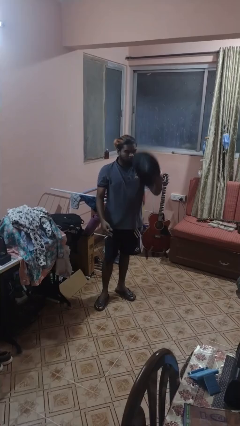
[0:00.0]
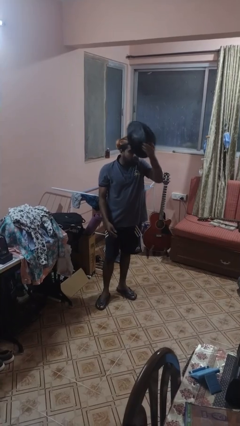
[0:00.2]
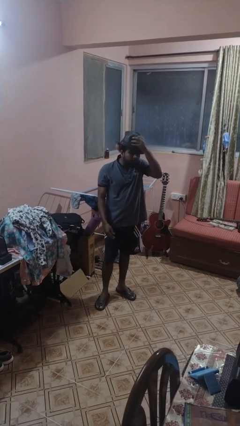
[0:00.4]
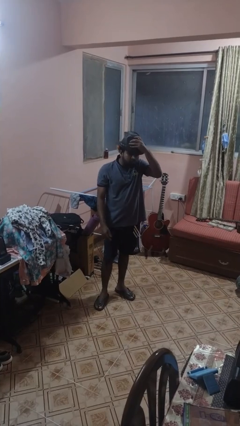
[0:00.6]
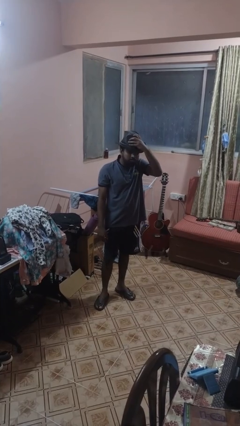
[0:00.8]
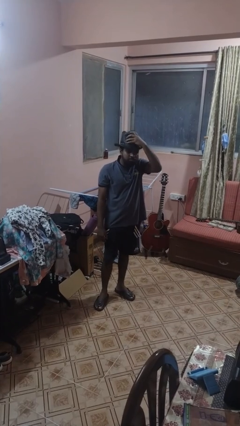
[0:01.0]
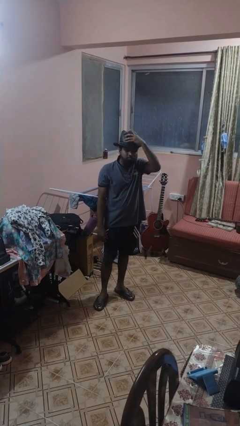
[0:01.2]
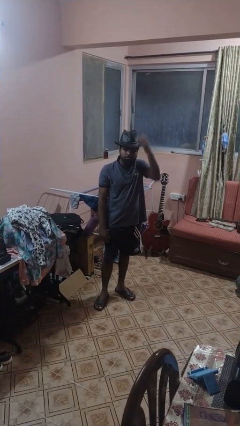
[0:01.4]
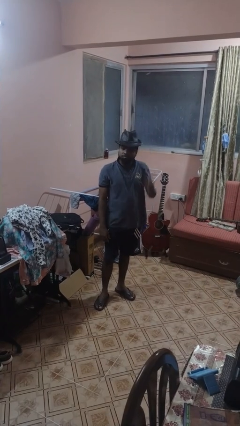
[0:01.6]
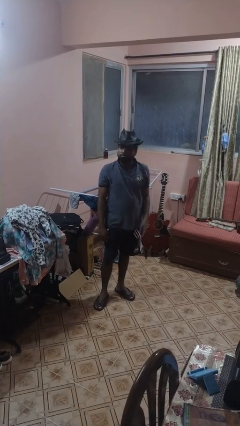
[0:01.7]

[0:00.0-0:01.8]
person puts on hat

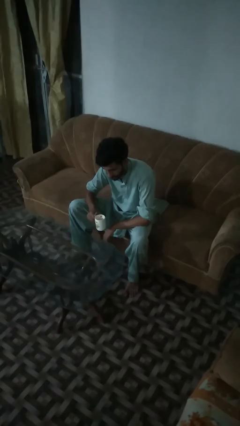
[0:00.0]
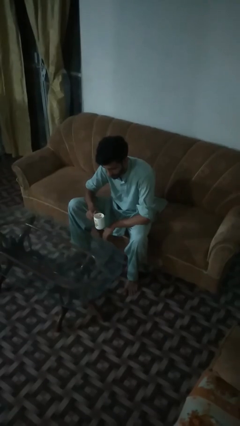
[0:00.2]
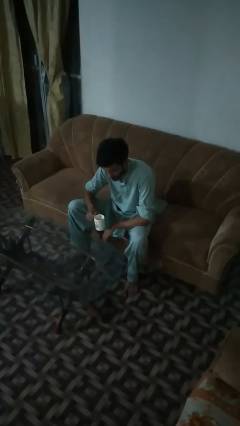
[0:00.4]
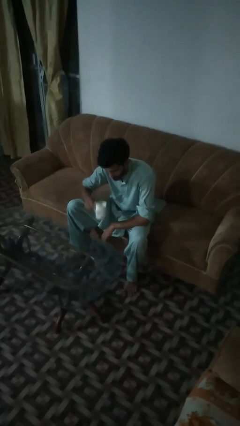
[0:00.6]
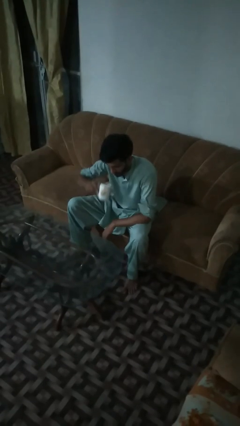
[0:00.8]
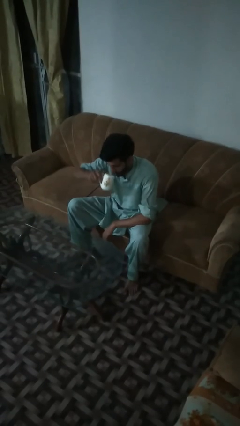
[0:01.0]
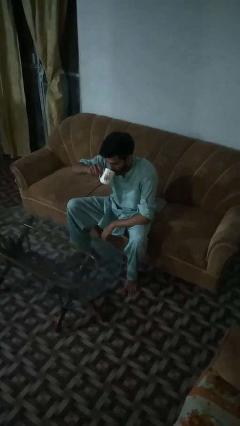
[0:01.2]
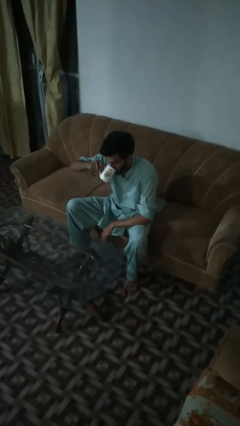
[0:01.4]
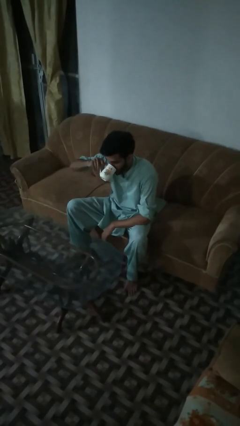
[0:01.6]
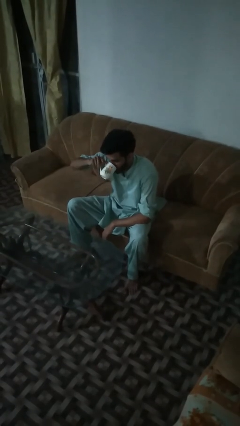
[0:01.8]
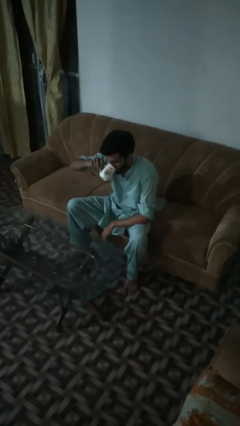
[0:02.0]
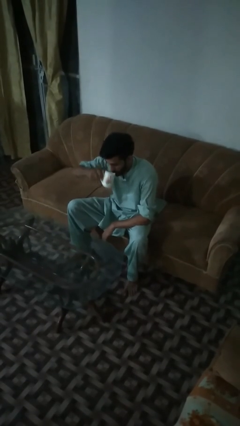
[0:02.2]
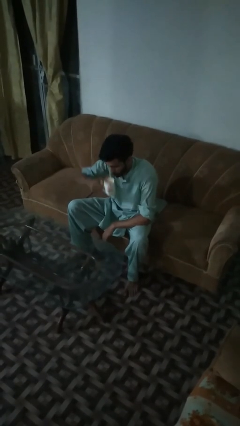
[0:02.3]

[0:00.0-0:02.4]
person drinks from mug

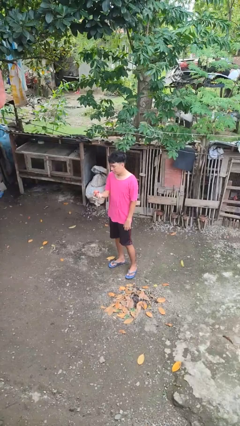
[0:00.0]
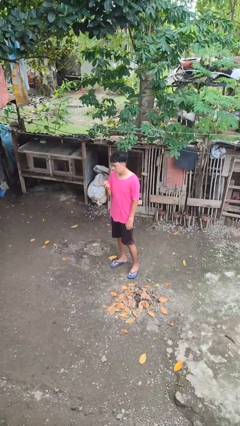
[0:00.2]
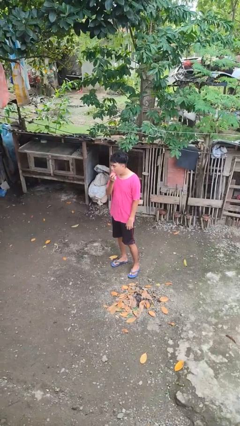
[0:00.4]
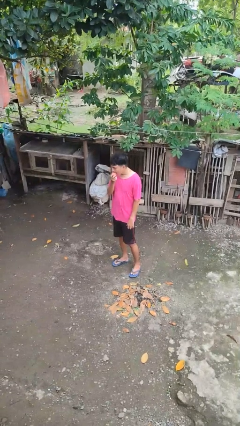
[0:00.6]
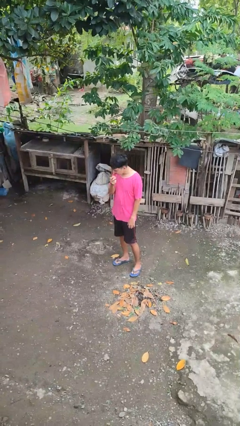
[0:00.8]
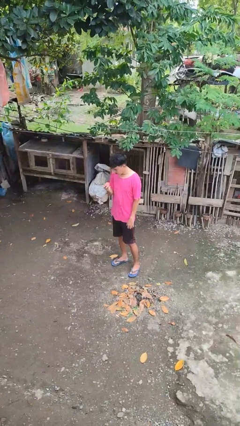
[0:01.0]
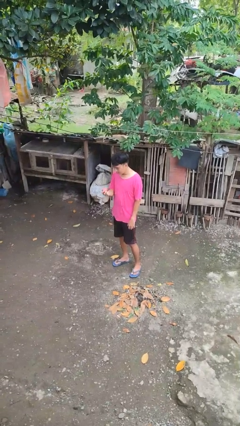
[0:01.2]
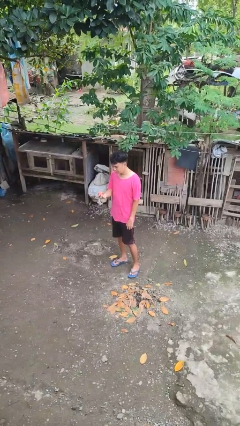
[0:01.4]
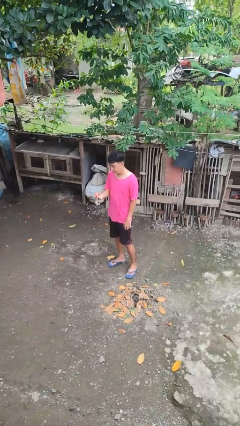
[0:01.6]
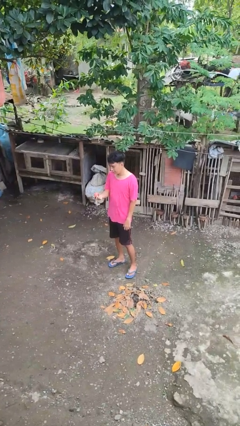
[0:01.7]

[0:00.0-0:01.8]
person eats apple

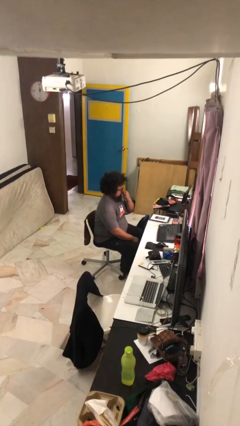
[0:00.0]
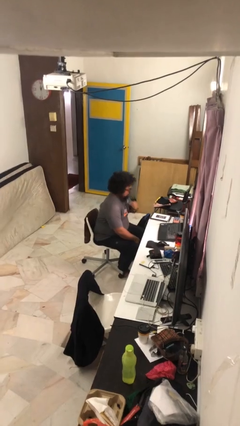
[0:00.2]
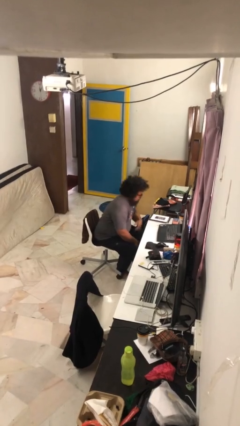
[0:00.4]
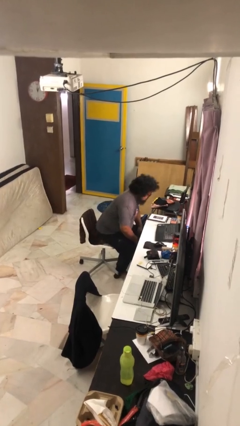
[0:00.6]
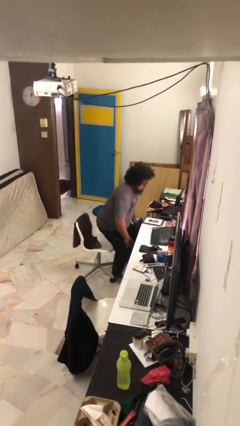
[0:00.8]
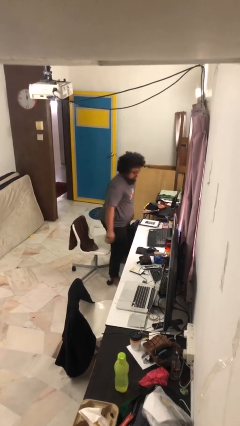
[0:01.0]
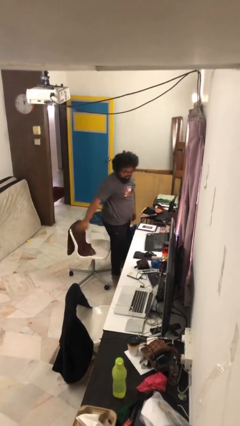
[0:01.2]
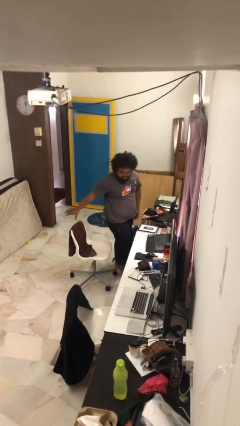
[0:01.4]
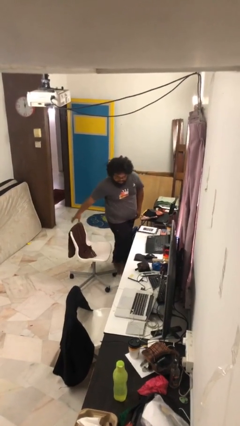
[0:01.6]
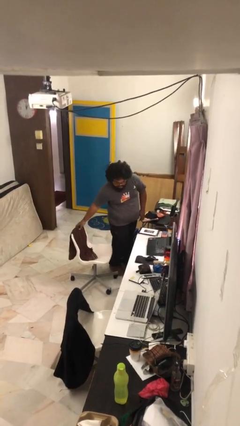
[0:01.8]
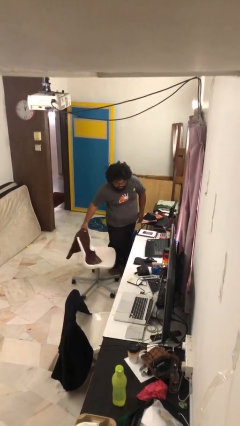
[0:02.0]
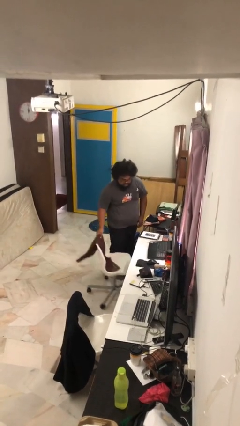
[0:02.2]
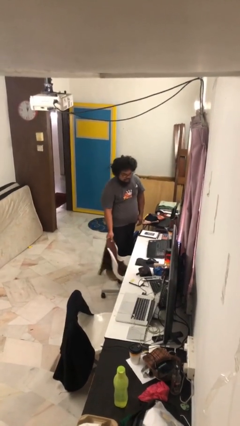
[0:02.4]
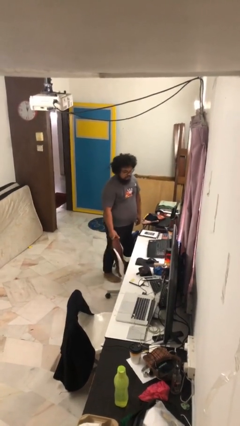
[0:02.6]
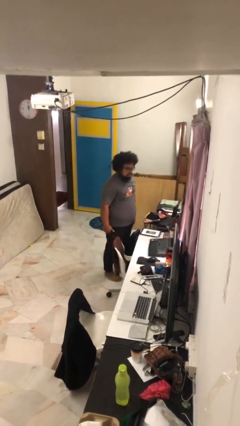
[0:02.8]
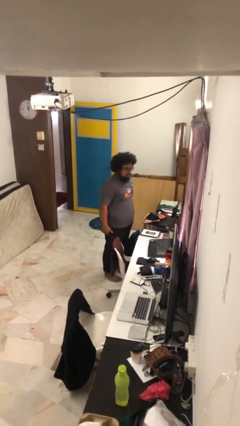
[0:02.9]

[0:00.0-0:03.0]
person stands up

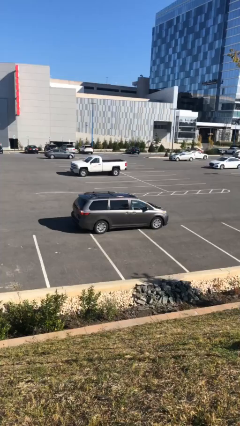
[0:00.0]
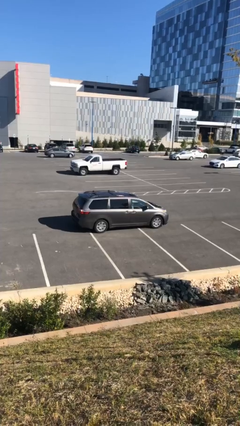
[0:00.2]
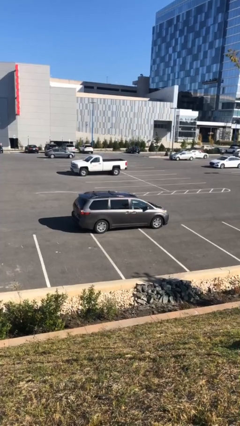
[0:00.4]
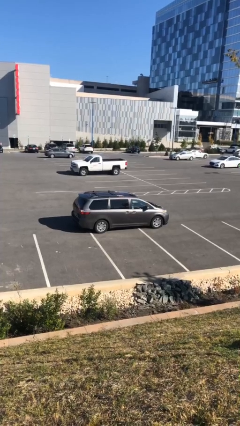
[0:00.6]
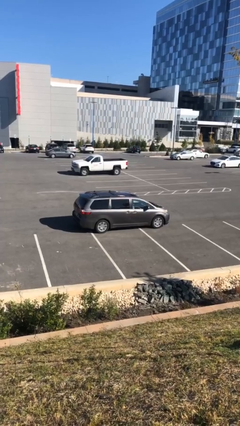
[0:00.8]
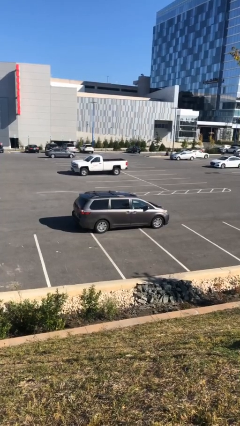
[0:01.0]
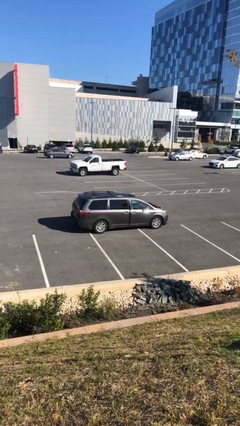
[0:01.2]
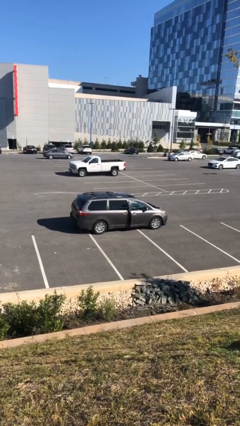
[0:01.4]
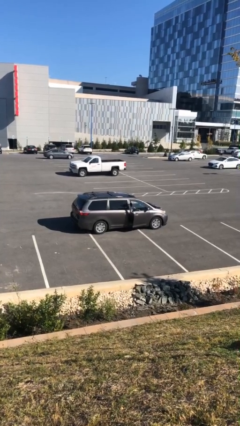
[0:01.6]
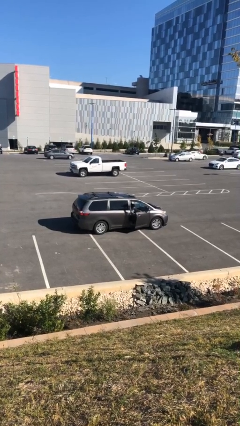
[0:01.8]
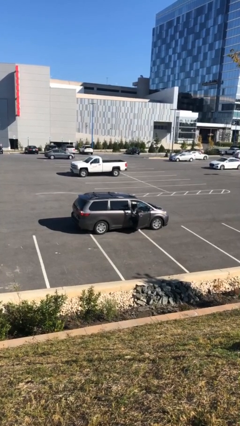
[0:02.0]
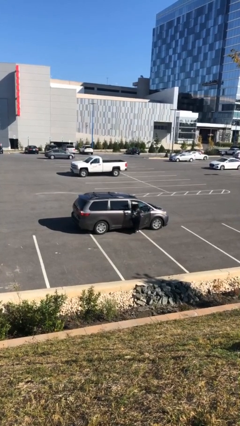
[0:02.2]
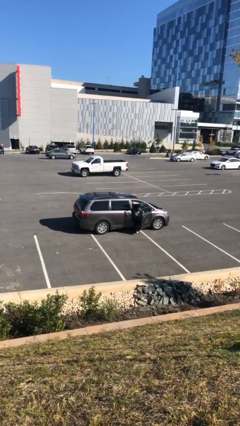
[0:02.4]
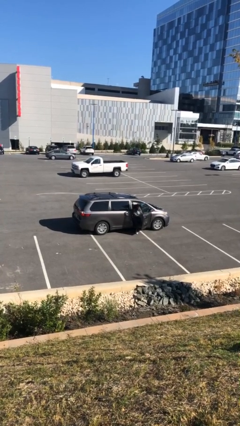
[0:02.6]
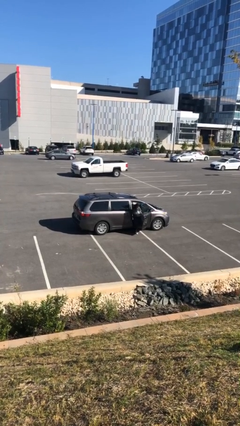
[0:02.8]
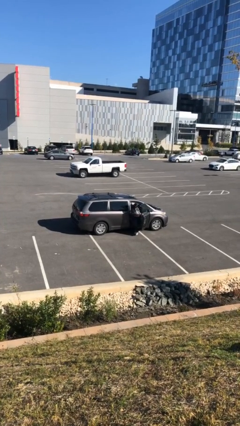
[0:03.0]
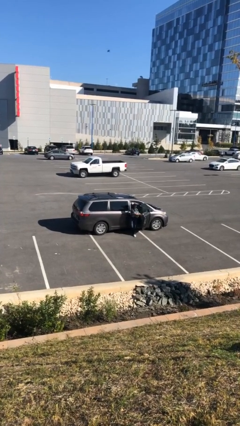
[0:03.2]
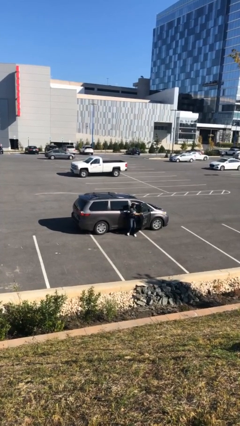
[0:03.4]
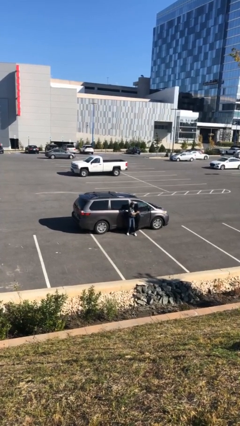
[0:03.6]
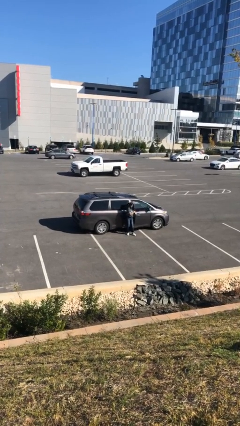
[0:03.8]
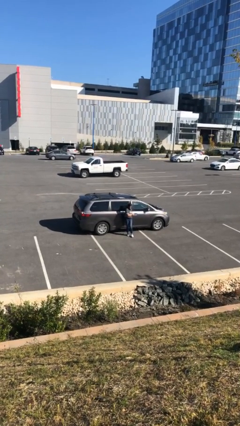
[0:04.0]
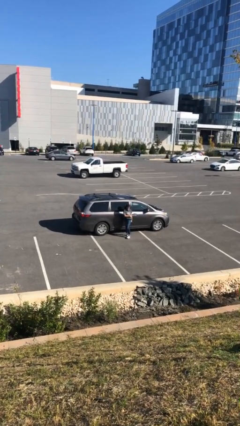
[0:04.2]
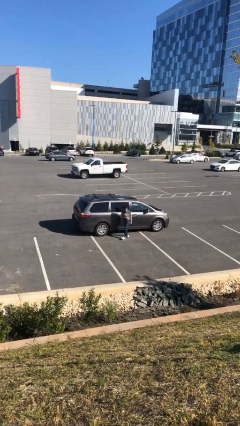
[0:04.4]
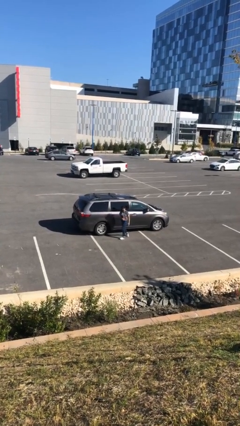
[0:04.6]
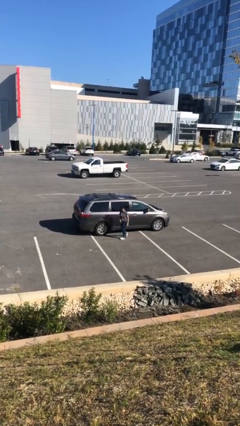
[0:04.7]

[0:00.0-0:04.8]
car drops off person

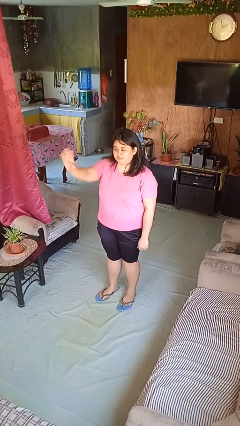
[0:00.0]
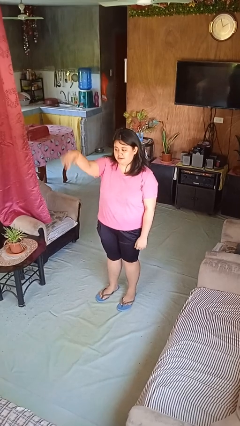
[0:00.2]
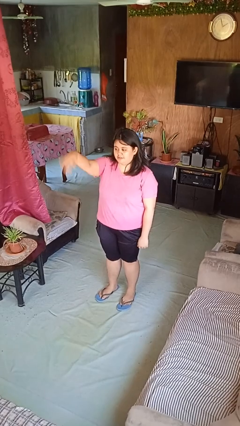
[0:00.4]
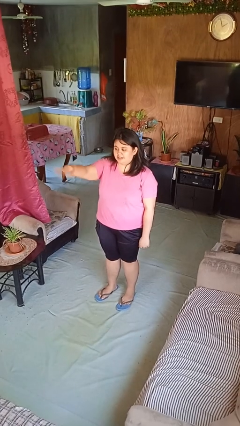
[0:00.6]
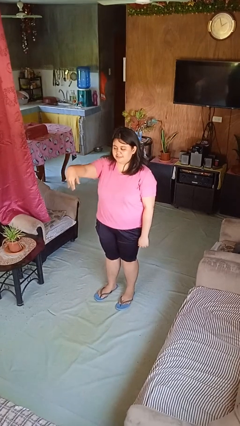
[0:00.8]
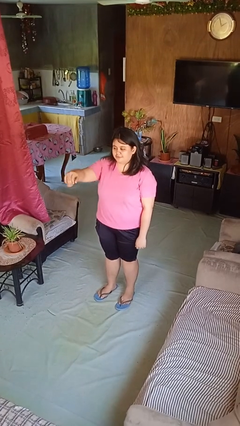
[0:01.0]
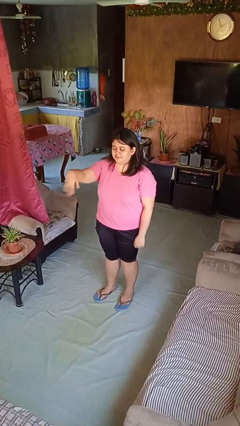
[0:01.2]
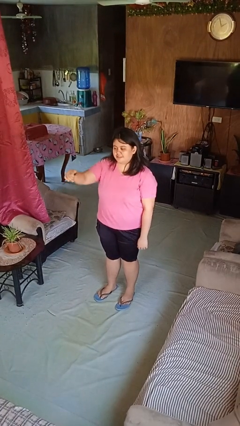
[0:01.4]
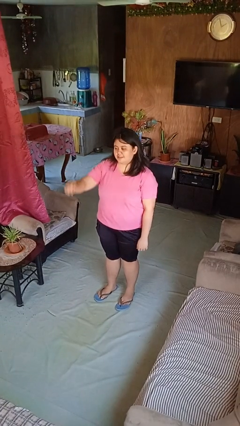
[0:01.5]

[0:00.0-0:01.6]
person gestures come here

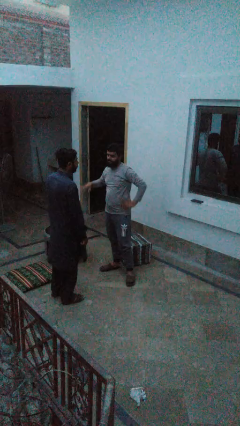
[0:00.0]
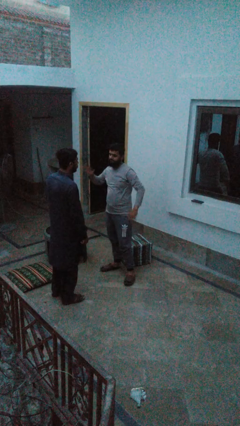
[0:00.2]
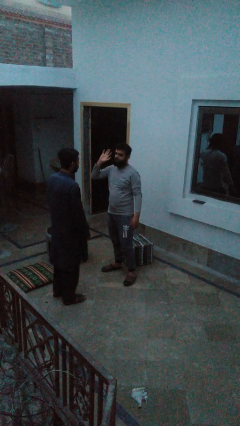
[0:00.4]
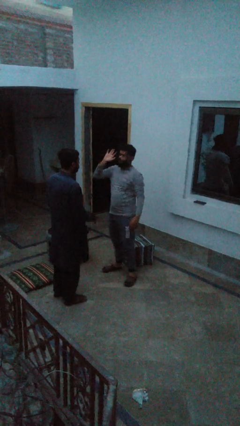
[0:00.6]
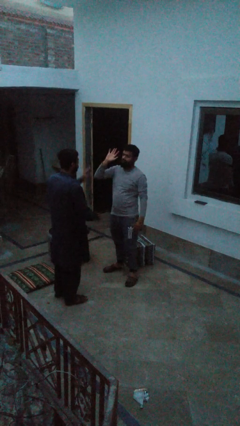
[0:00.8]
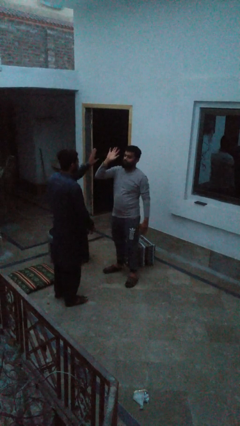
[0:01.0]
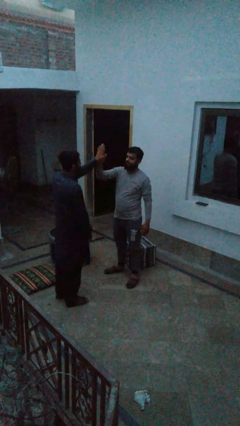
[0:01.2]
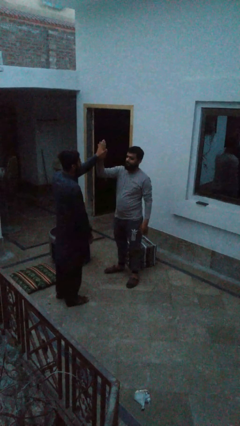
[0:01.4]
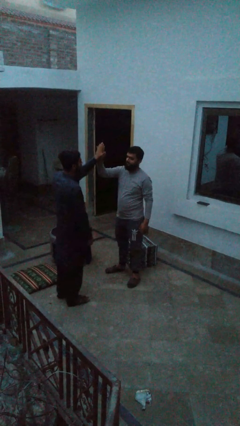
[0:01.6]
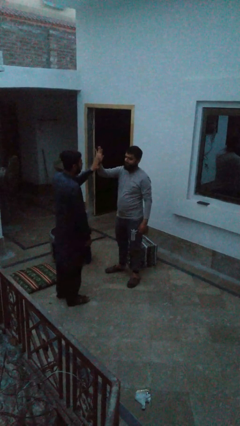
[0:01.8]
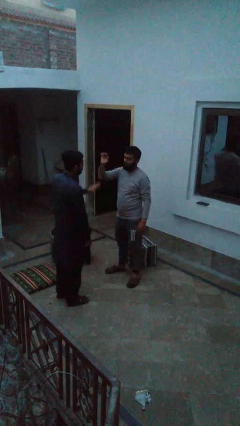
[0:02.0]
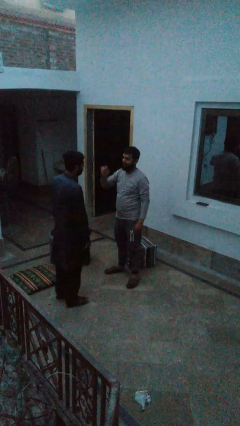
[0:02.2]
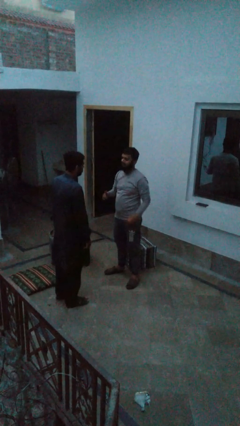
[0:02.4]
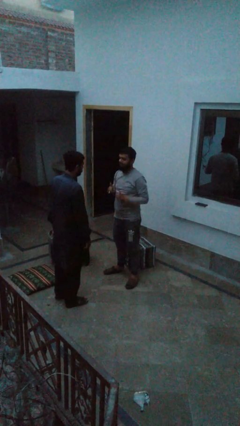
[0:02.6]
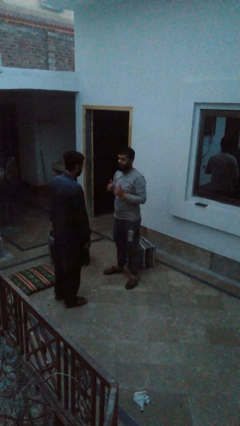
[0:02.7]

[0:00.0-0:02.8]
person highfives hand
